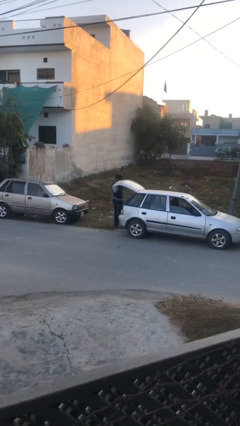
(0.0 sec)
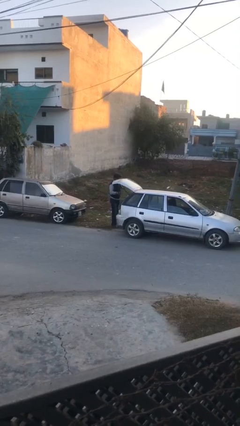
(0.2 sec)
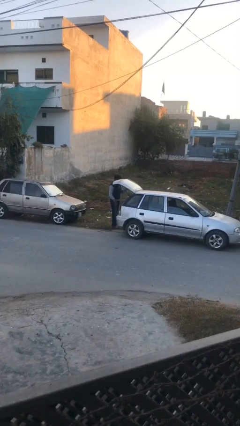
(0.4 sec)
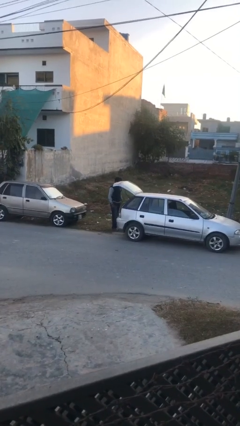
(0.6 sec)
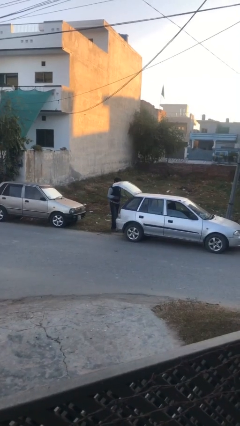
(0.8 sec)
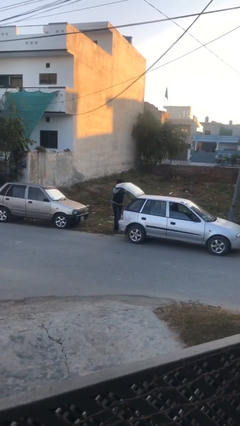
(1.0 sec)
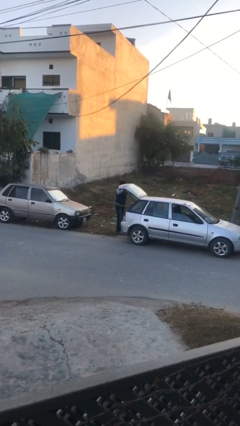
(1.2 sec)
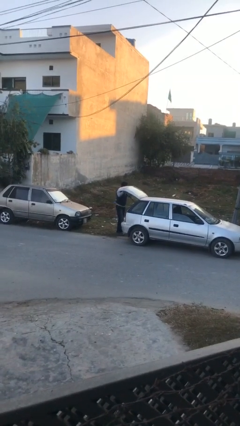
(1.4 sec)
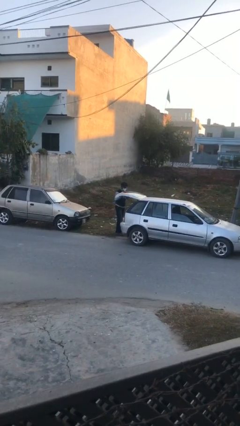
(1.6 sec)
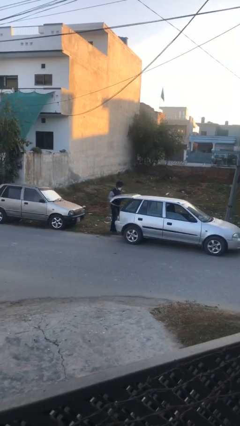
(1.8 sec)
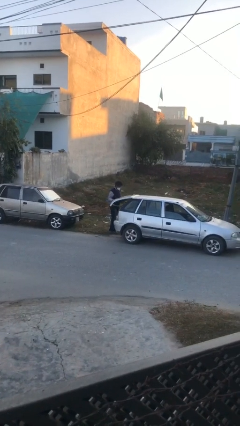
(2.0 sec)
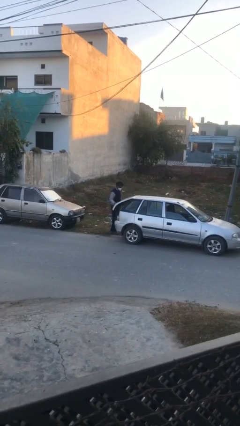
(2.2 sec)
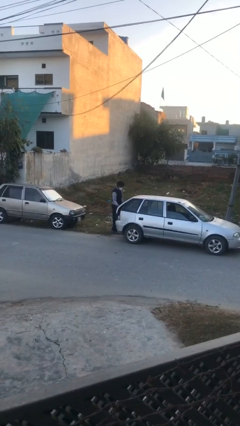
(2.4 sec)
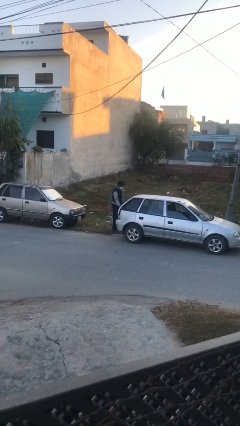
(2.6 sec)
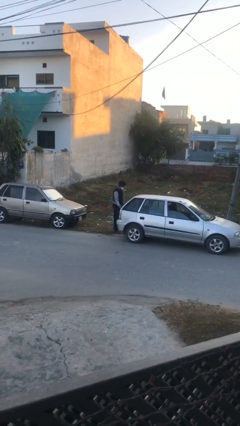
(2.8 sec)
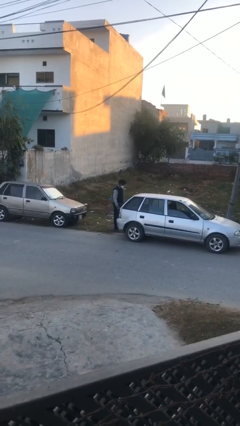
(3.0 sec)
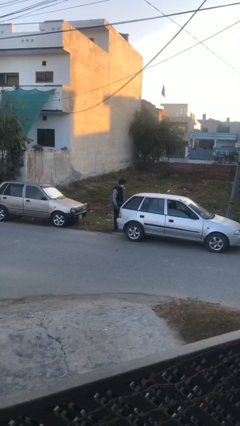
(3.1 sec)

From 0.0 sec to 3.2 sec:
person closes car trunk

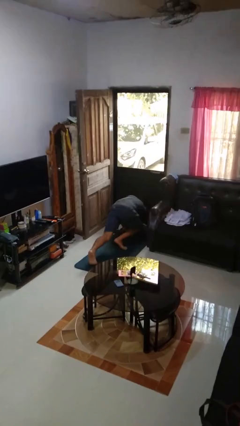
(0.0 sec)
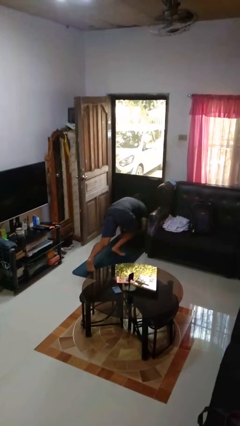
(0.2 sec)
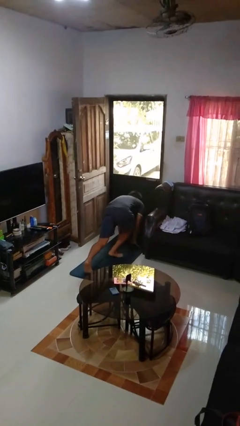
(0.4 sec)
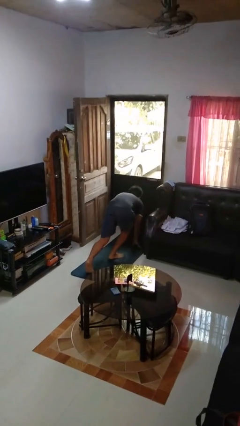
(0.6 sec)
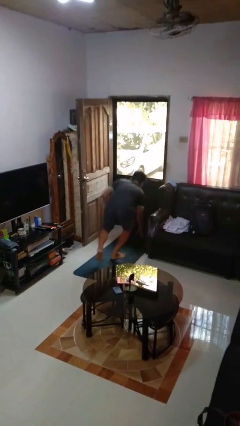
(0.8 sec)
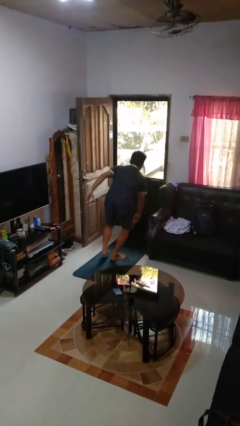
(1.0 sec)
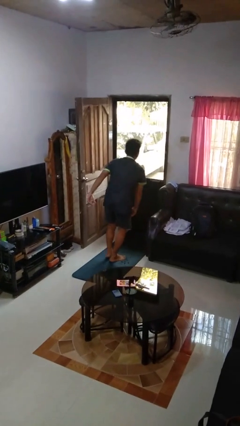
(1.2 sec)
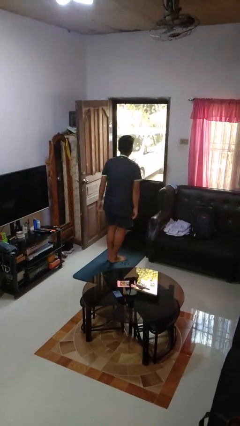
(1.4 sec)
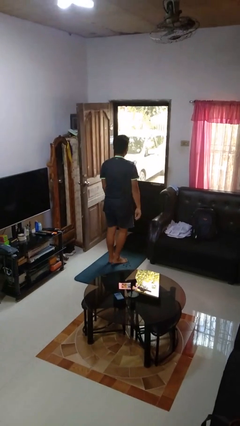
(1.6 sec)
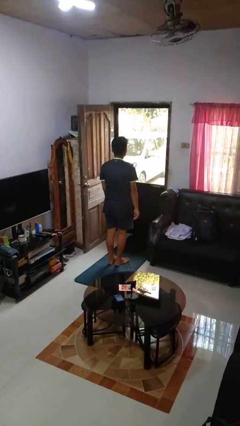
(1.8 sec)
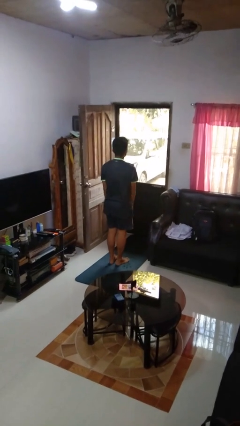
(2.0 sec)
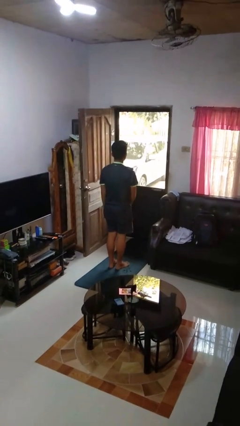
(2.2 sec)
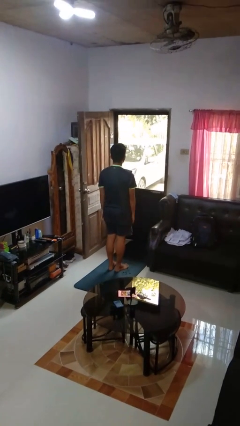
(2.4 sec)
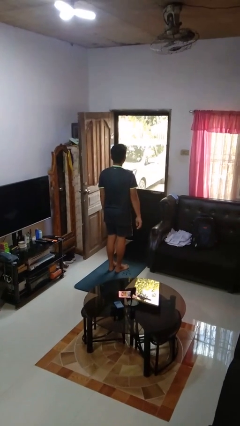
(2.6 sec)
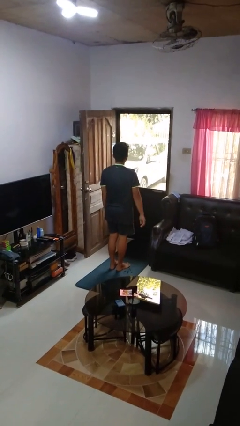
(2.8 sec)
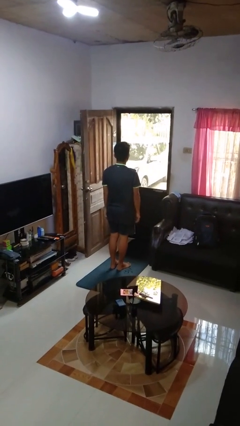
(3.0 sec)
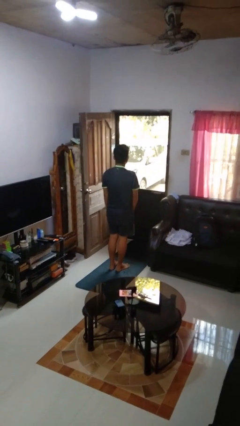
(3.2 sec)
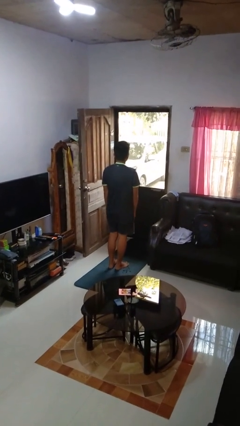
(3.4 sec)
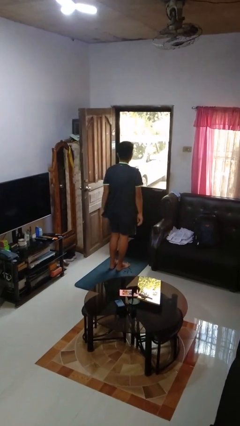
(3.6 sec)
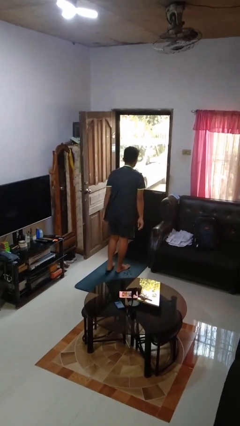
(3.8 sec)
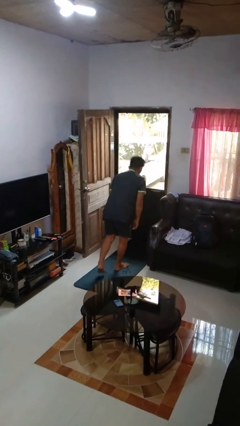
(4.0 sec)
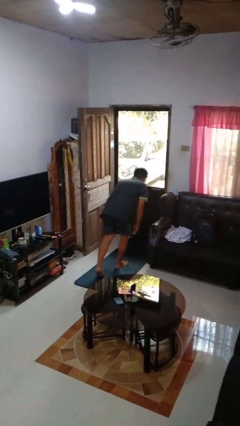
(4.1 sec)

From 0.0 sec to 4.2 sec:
person stands up from floor

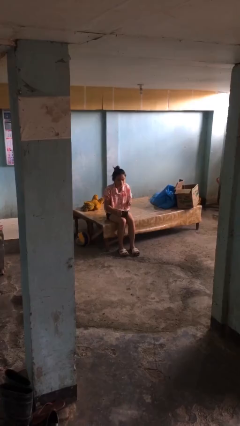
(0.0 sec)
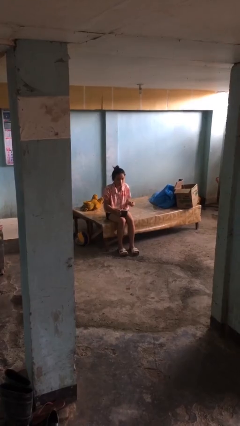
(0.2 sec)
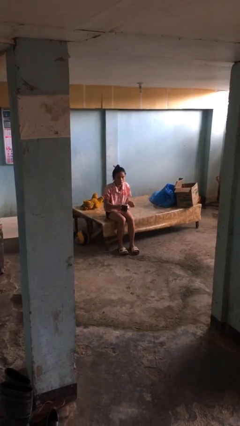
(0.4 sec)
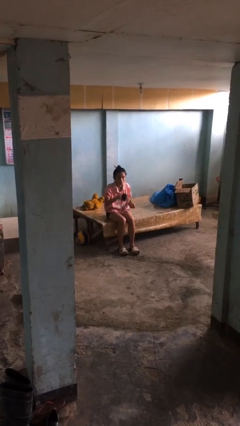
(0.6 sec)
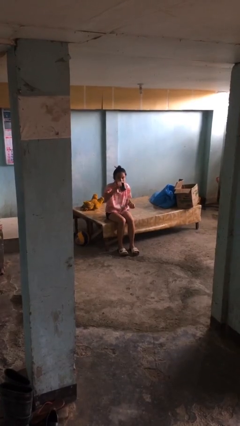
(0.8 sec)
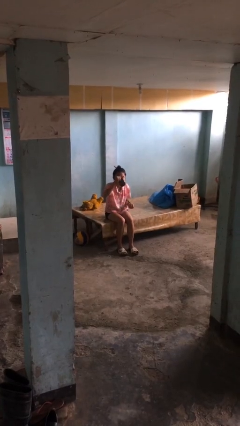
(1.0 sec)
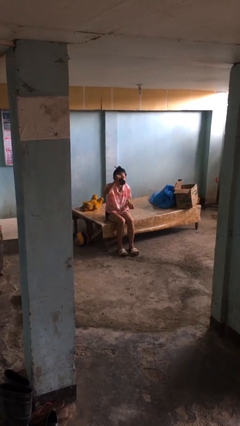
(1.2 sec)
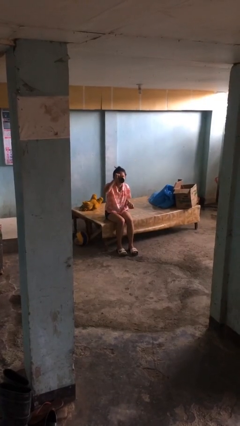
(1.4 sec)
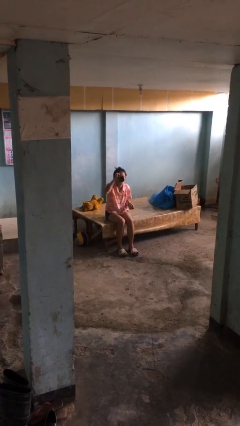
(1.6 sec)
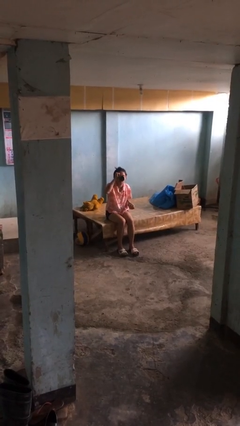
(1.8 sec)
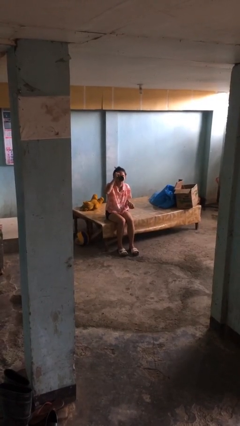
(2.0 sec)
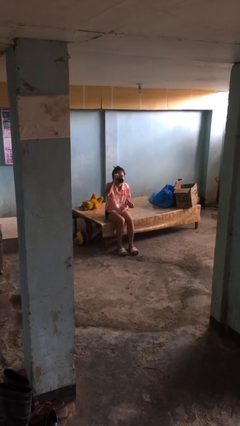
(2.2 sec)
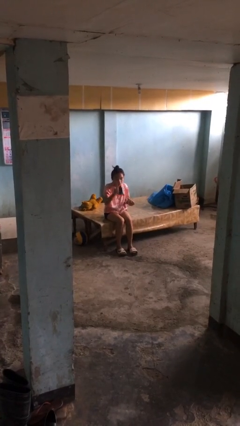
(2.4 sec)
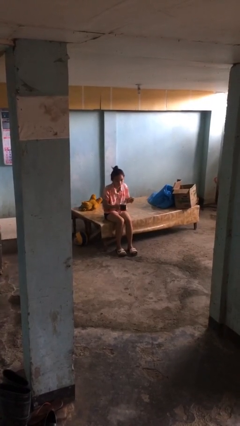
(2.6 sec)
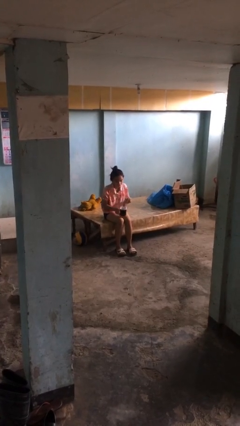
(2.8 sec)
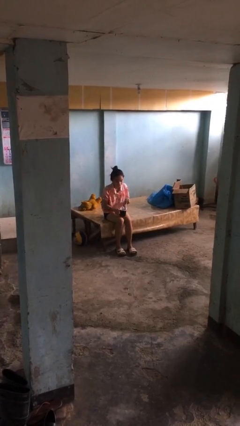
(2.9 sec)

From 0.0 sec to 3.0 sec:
person drinks from mug

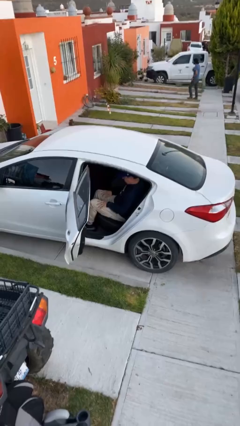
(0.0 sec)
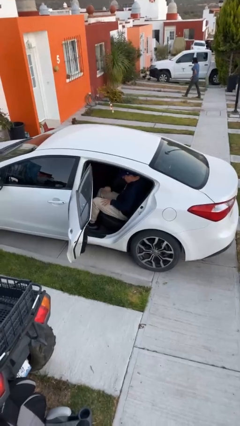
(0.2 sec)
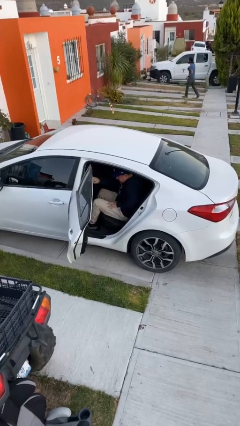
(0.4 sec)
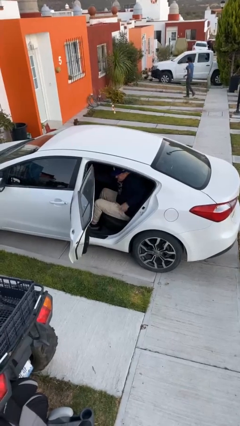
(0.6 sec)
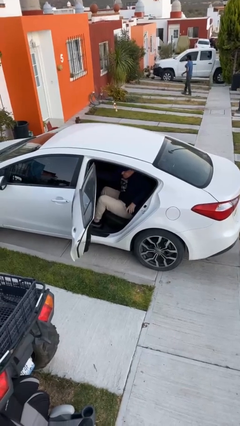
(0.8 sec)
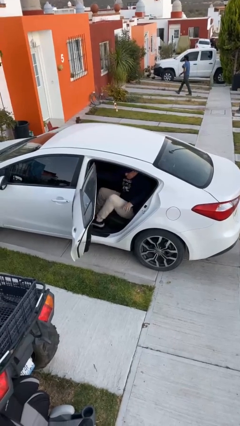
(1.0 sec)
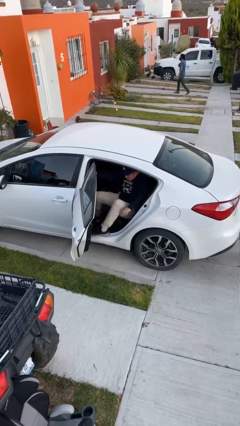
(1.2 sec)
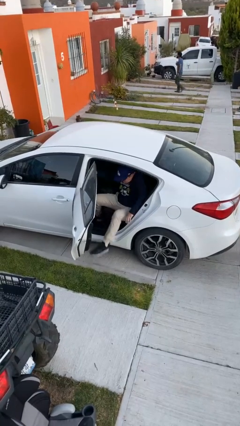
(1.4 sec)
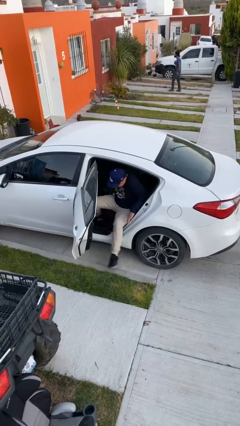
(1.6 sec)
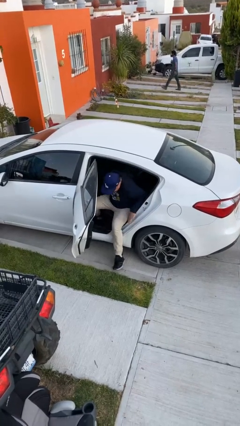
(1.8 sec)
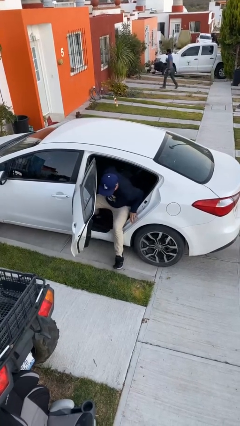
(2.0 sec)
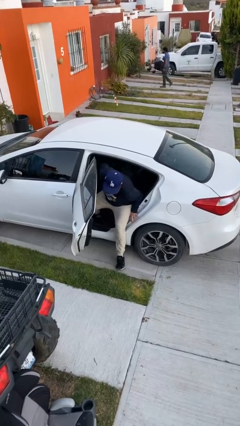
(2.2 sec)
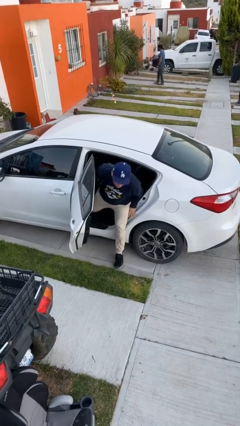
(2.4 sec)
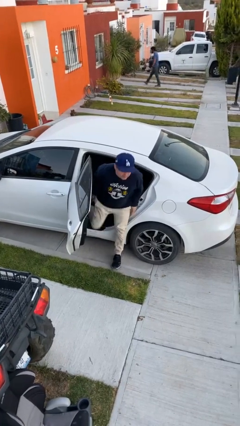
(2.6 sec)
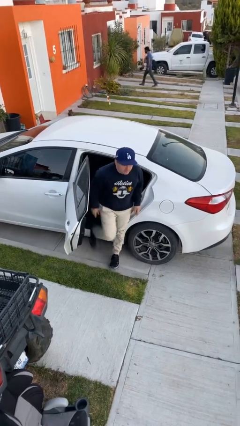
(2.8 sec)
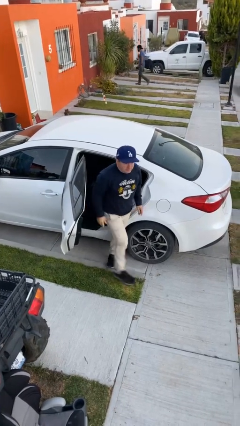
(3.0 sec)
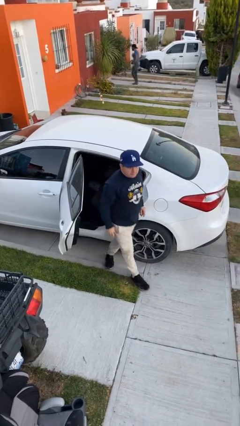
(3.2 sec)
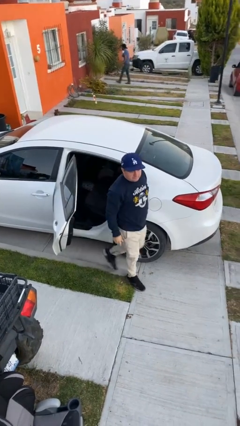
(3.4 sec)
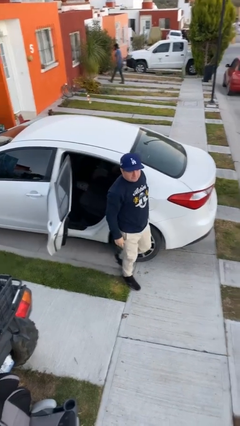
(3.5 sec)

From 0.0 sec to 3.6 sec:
person exits car

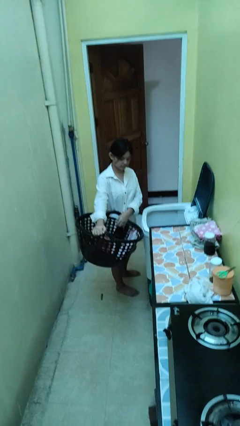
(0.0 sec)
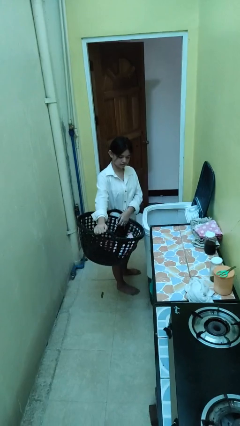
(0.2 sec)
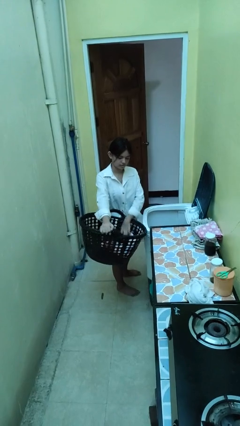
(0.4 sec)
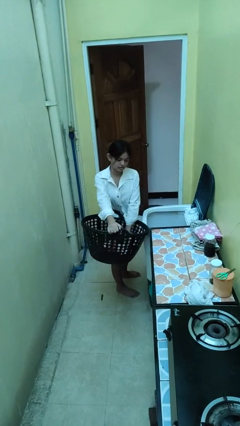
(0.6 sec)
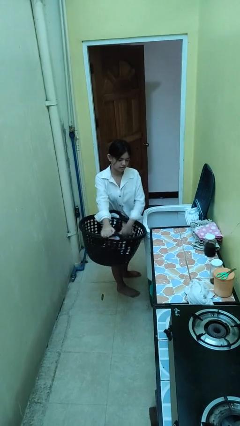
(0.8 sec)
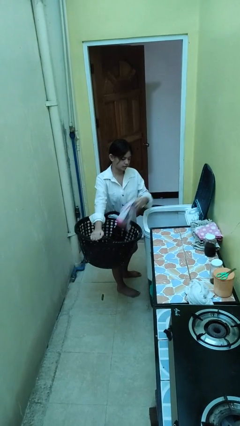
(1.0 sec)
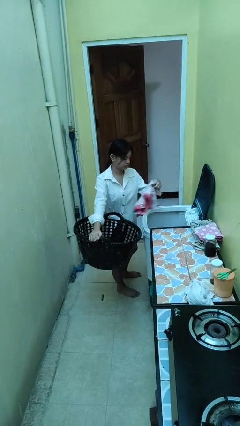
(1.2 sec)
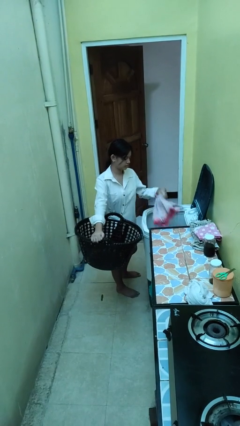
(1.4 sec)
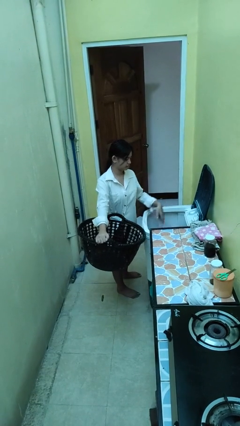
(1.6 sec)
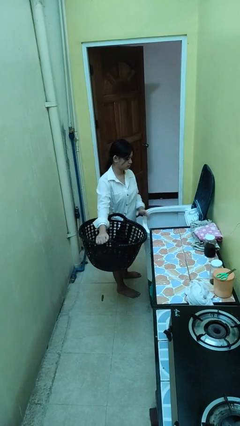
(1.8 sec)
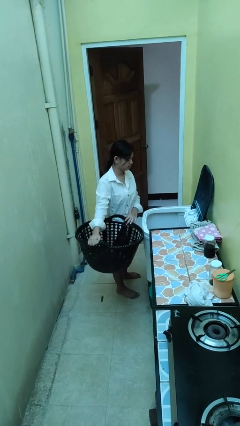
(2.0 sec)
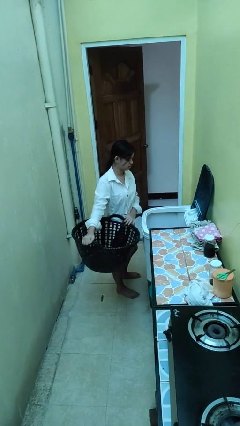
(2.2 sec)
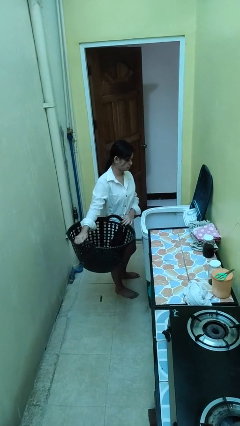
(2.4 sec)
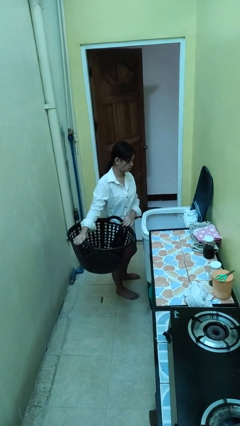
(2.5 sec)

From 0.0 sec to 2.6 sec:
person loads clotheswasher

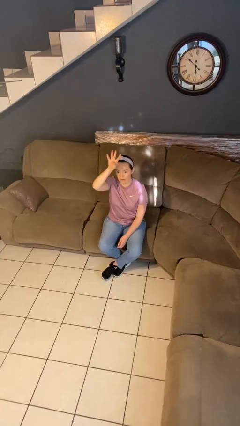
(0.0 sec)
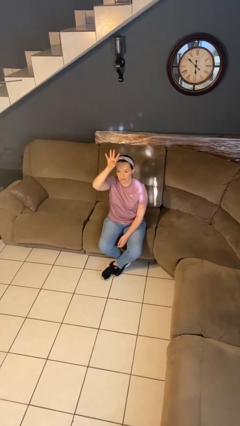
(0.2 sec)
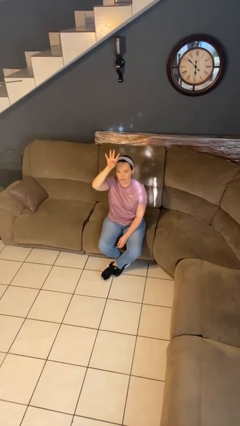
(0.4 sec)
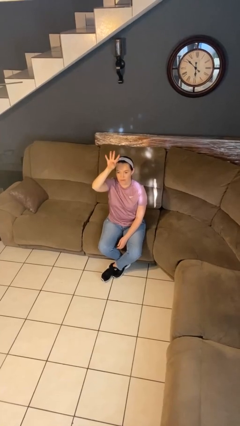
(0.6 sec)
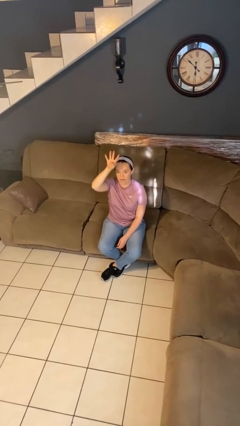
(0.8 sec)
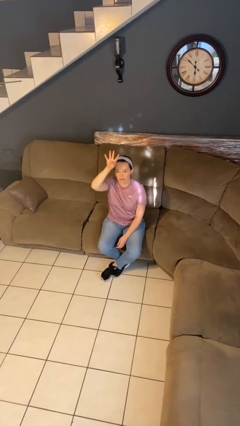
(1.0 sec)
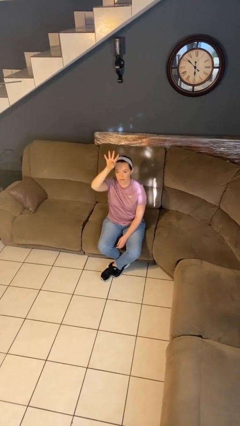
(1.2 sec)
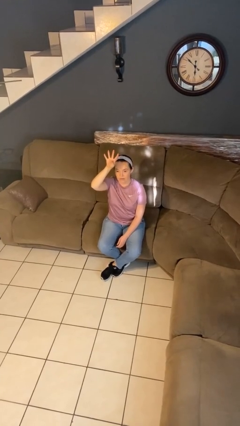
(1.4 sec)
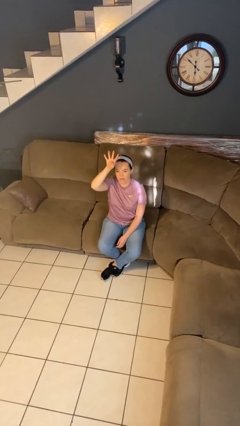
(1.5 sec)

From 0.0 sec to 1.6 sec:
person gestures number four
